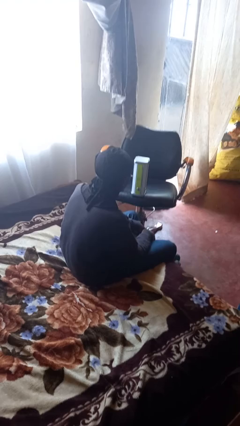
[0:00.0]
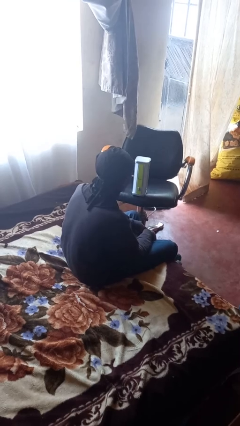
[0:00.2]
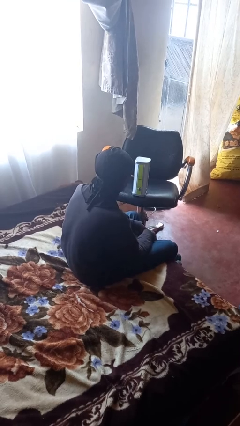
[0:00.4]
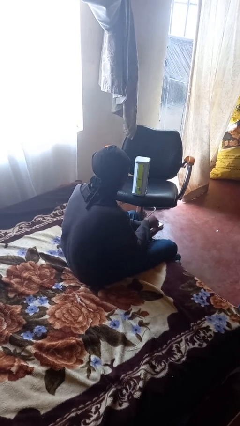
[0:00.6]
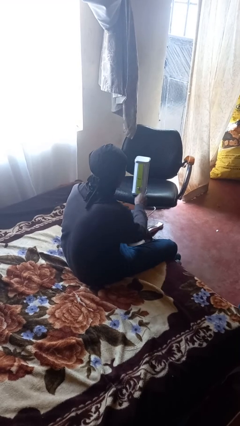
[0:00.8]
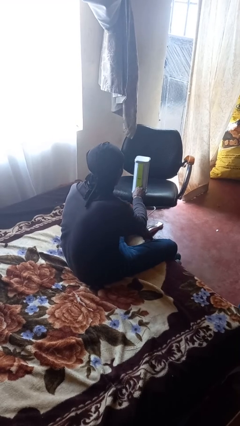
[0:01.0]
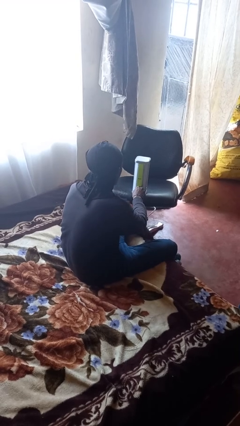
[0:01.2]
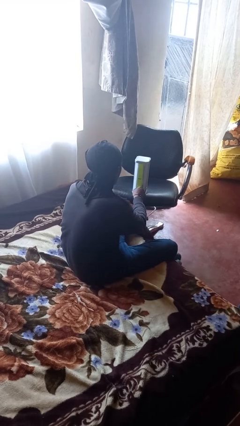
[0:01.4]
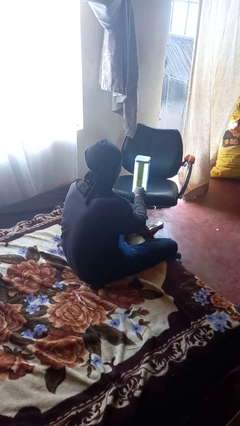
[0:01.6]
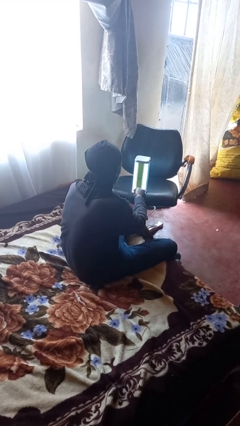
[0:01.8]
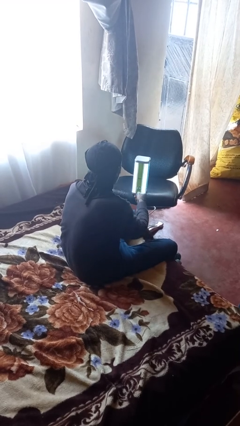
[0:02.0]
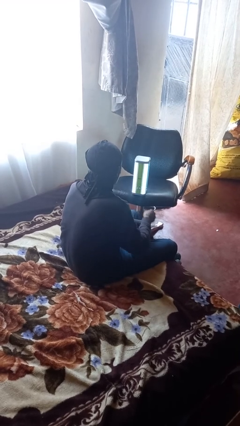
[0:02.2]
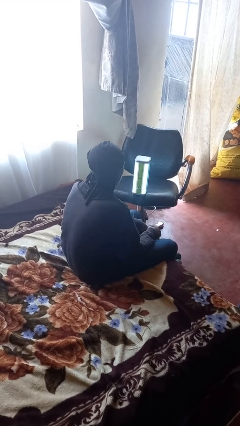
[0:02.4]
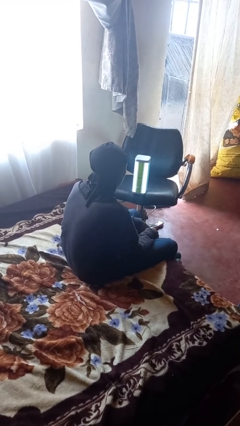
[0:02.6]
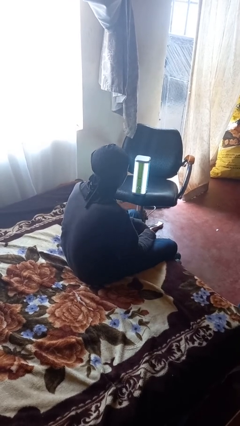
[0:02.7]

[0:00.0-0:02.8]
person turns on lamp

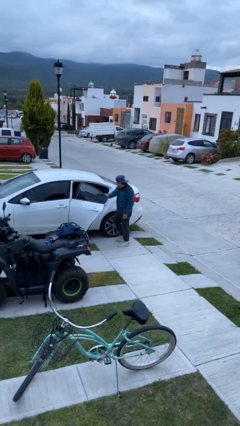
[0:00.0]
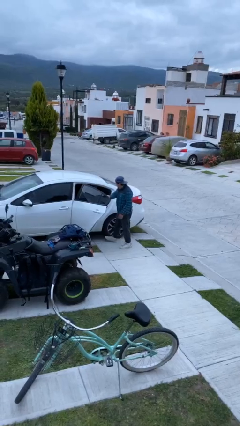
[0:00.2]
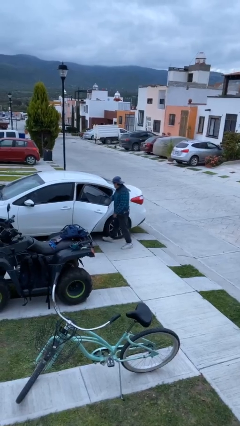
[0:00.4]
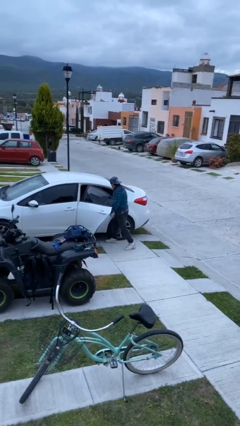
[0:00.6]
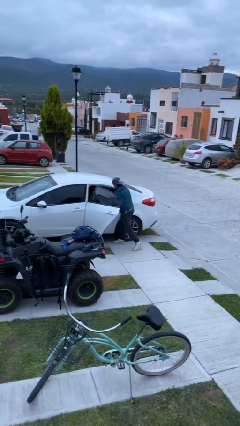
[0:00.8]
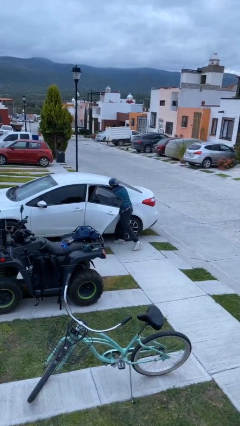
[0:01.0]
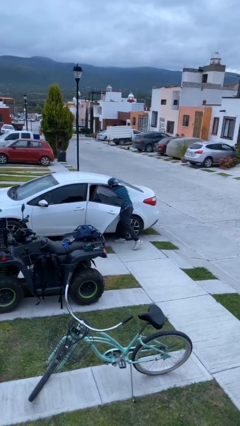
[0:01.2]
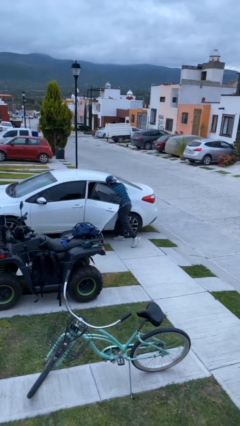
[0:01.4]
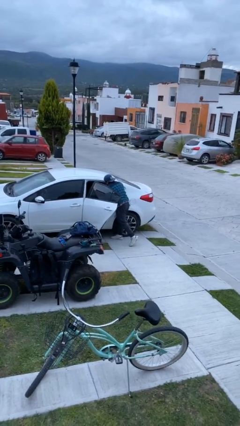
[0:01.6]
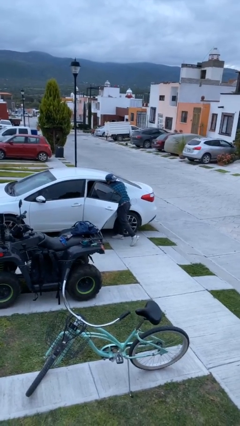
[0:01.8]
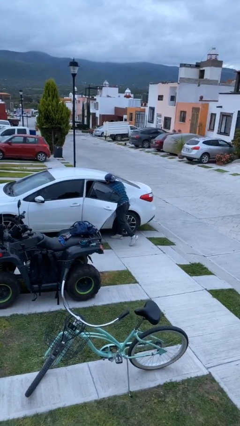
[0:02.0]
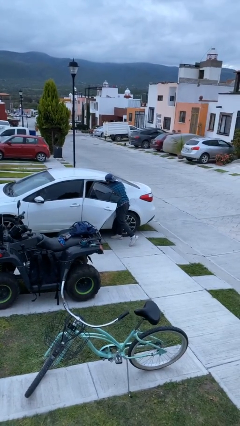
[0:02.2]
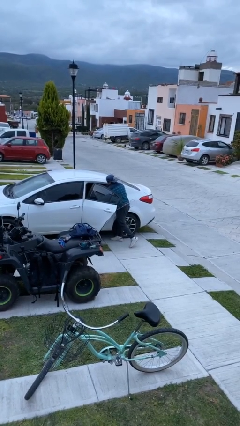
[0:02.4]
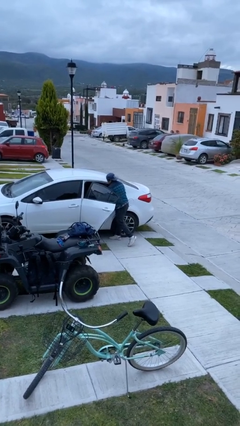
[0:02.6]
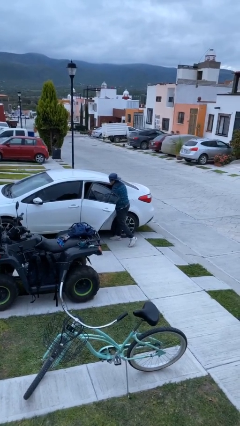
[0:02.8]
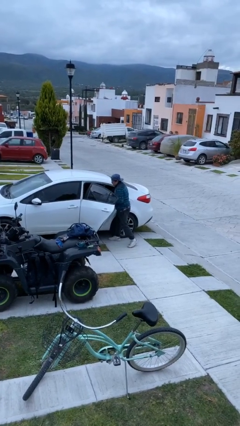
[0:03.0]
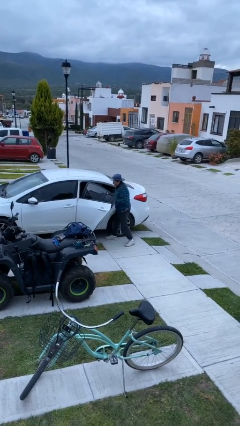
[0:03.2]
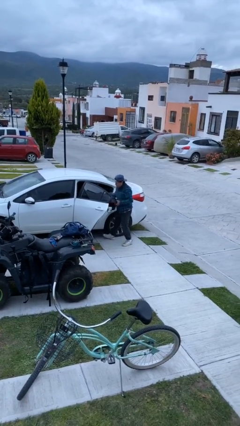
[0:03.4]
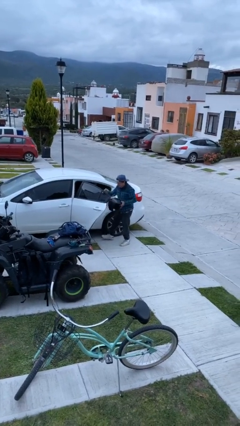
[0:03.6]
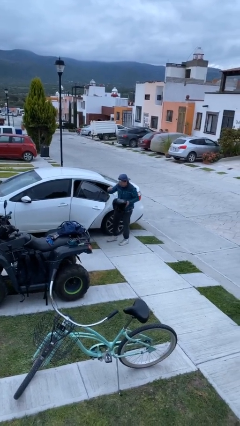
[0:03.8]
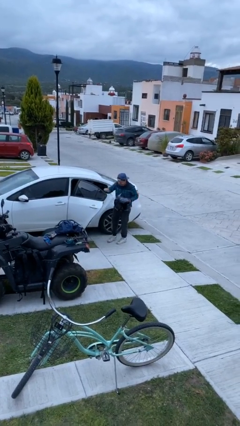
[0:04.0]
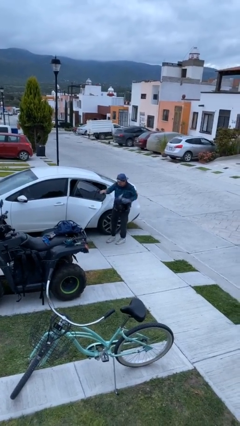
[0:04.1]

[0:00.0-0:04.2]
person unloads car

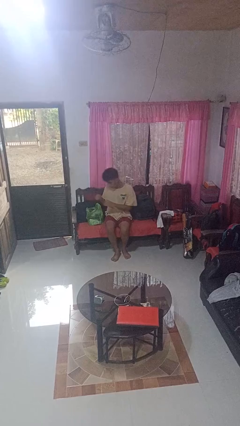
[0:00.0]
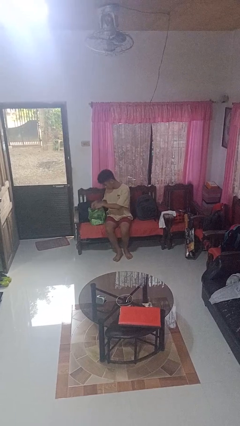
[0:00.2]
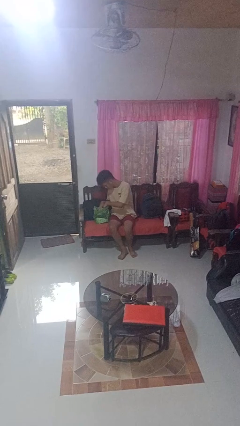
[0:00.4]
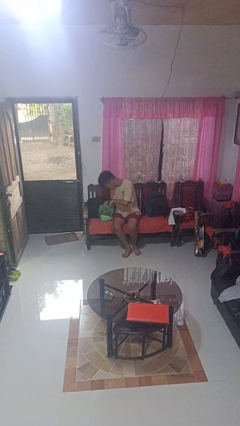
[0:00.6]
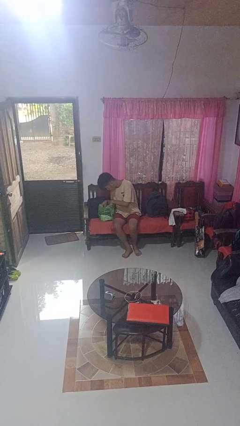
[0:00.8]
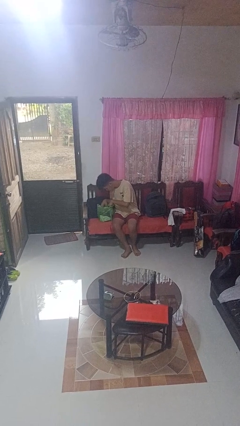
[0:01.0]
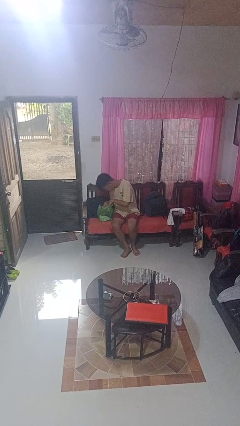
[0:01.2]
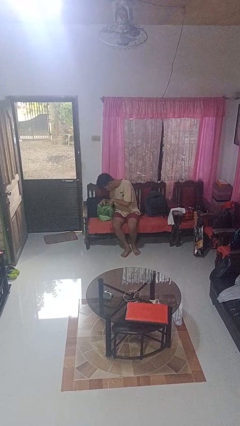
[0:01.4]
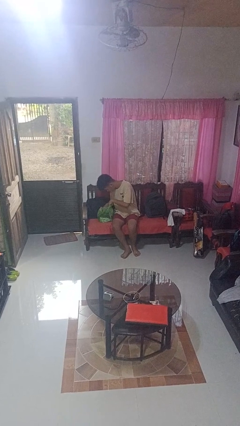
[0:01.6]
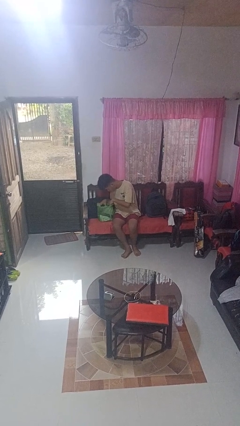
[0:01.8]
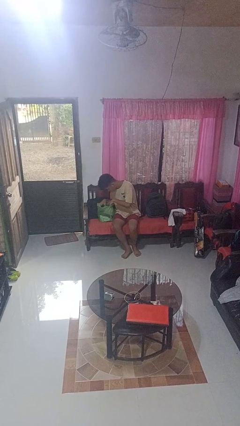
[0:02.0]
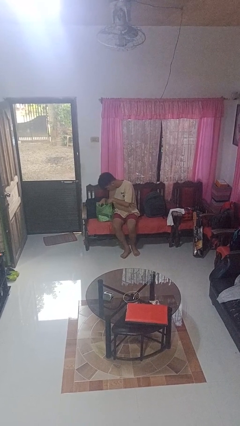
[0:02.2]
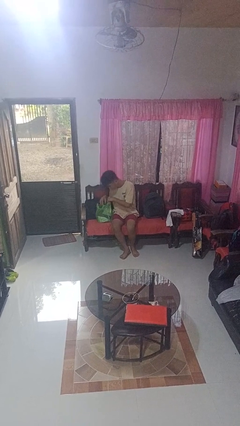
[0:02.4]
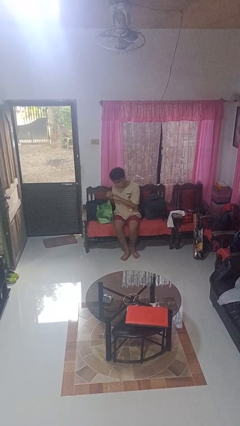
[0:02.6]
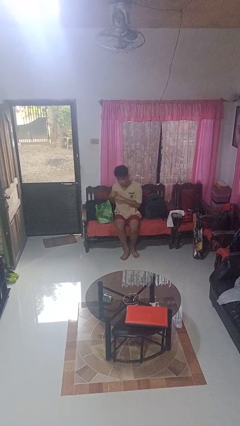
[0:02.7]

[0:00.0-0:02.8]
person searches in bag

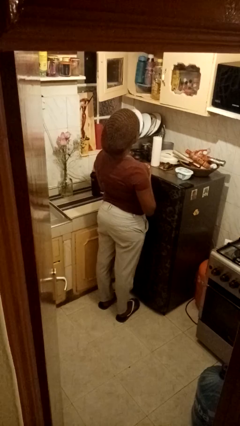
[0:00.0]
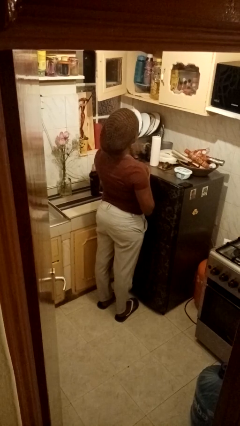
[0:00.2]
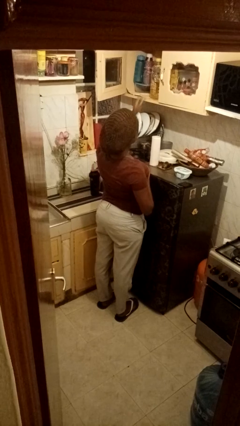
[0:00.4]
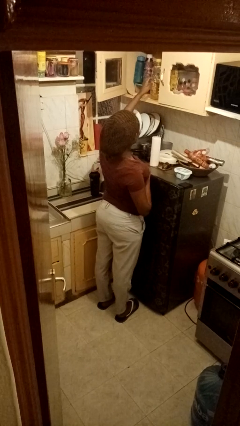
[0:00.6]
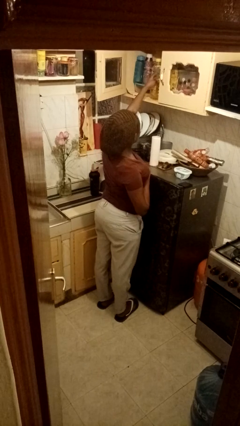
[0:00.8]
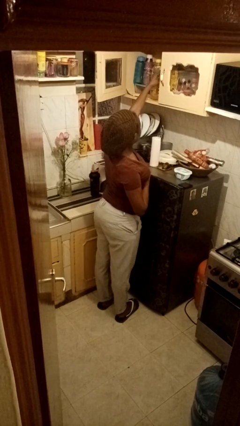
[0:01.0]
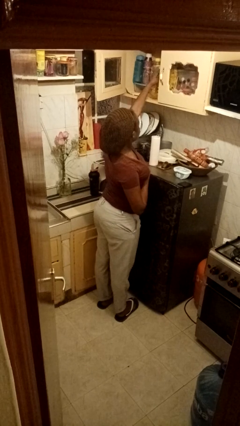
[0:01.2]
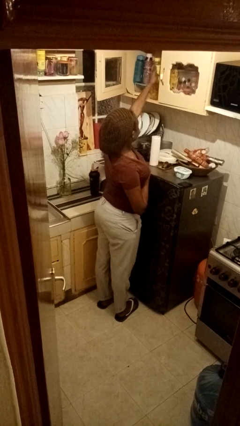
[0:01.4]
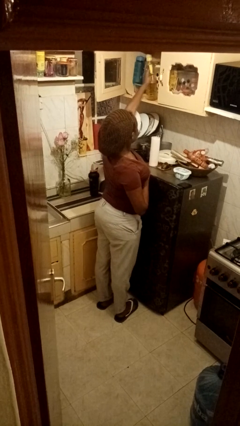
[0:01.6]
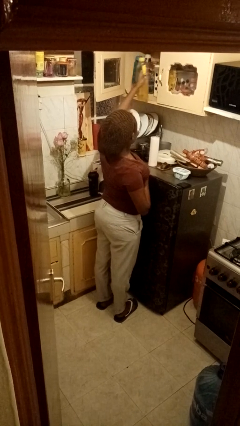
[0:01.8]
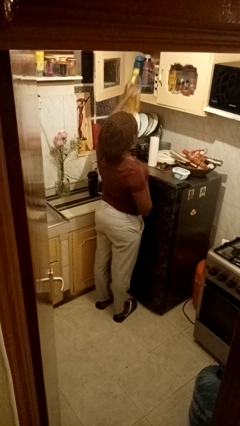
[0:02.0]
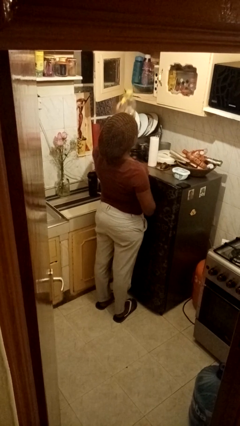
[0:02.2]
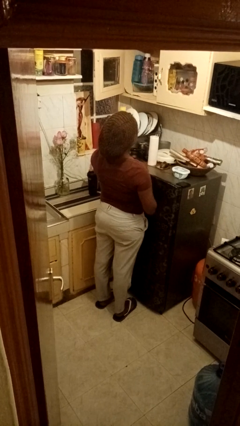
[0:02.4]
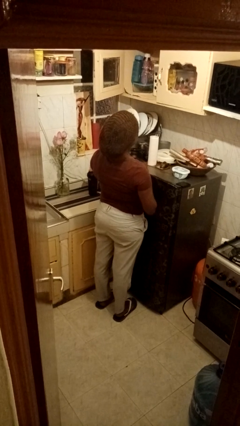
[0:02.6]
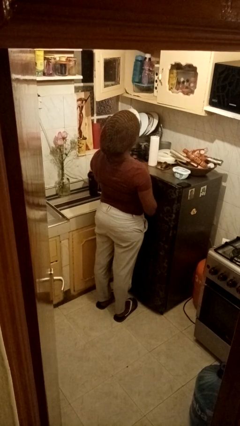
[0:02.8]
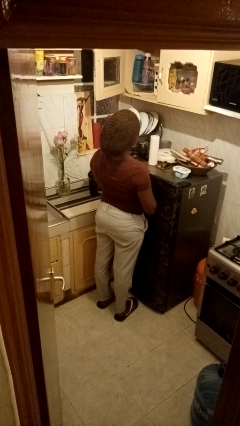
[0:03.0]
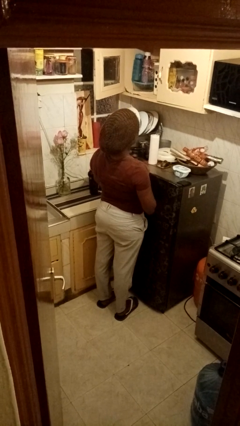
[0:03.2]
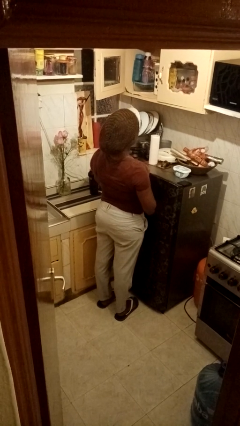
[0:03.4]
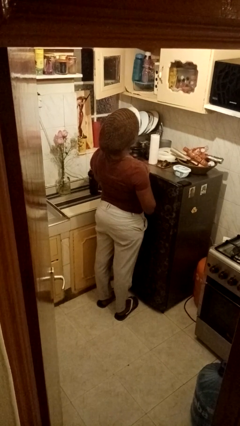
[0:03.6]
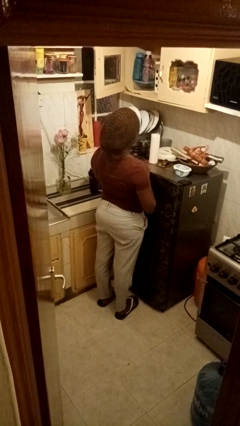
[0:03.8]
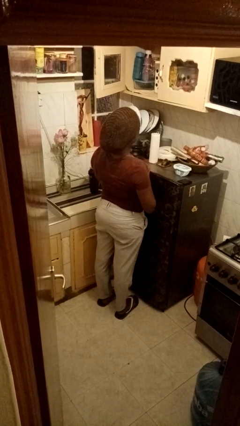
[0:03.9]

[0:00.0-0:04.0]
person picks up object from shelf

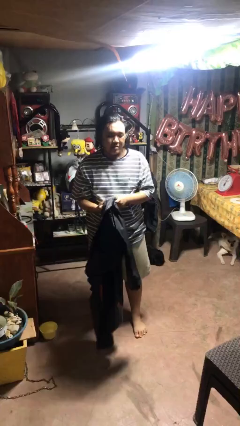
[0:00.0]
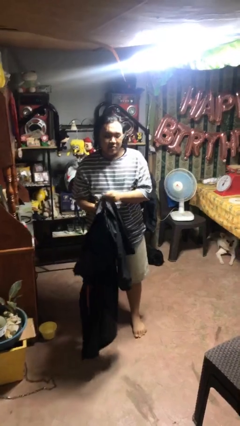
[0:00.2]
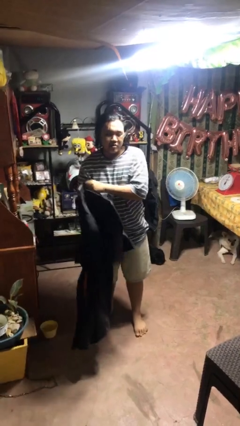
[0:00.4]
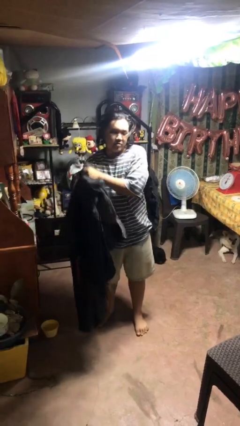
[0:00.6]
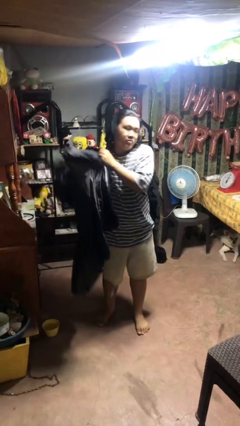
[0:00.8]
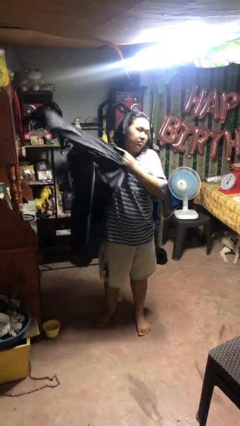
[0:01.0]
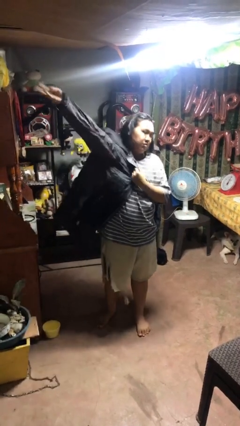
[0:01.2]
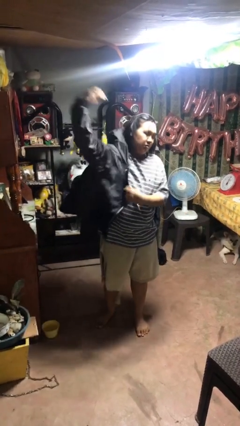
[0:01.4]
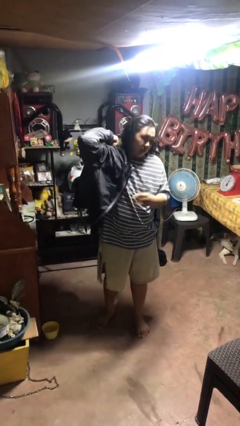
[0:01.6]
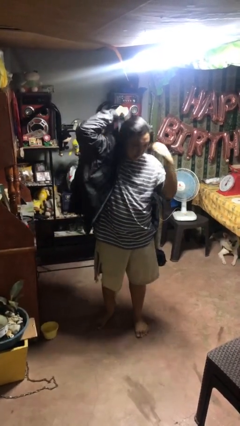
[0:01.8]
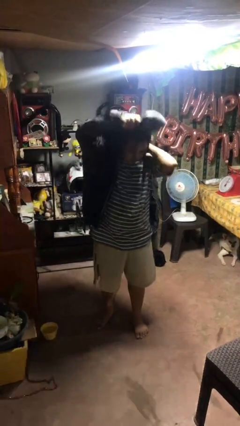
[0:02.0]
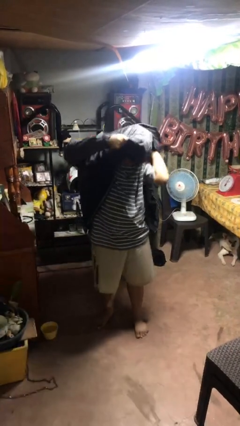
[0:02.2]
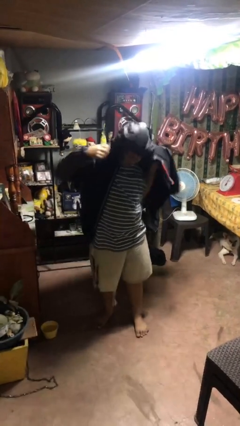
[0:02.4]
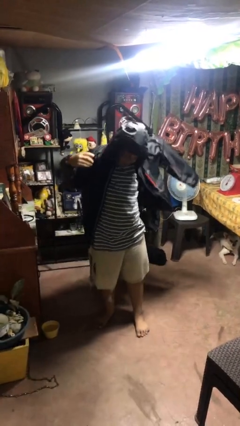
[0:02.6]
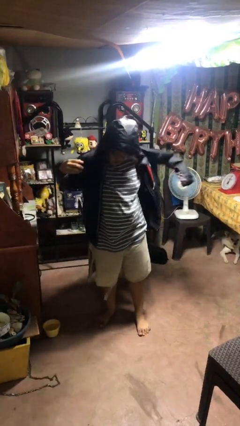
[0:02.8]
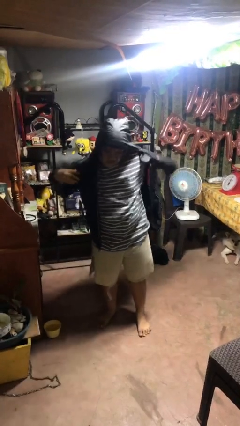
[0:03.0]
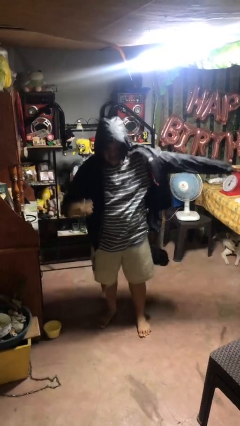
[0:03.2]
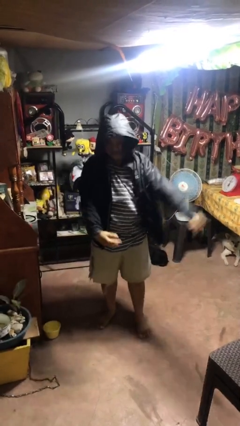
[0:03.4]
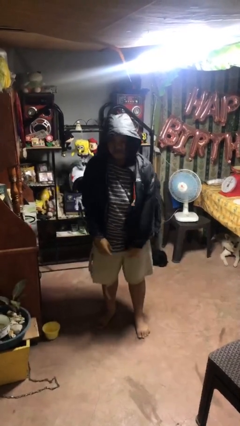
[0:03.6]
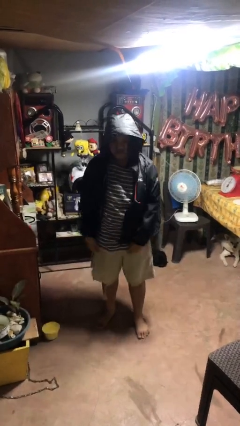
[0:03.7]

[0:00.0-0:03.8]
person puts on hoodie
